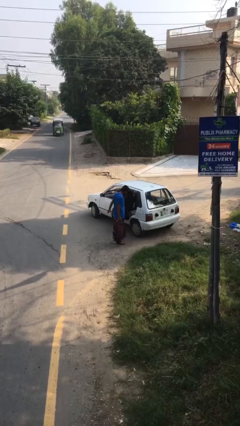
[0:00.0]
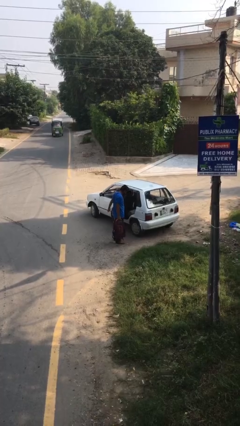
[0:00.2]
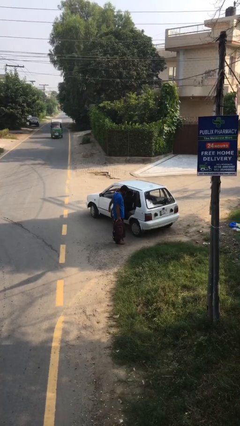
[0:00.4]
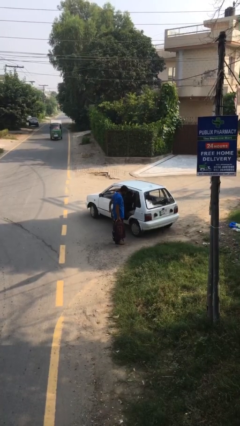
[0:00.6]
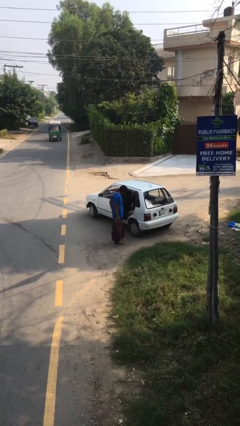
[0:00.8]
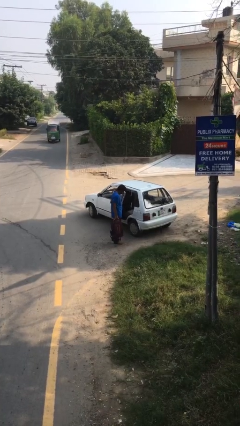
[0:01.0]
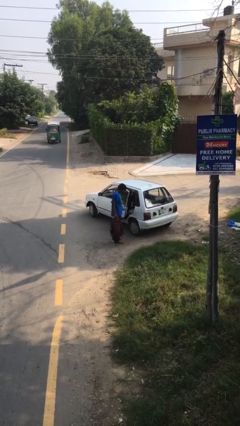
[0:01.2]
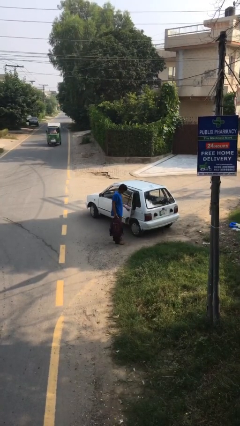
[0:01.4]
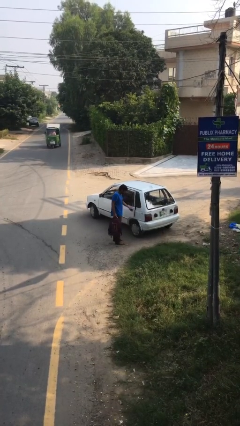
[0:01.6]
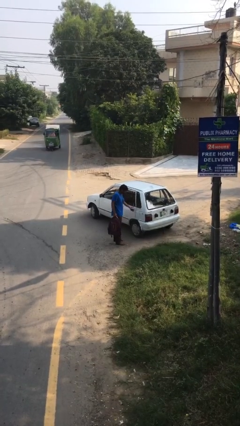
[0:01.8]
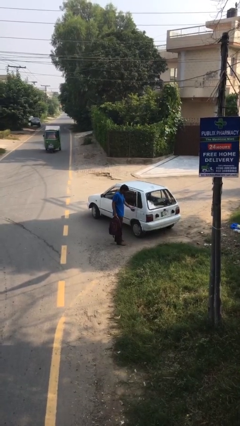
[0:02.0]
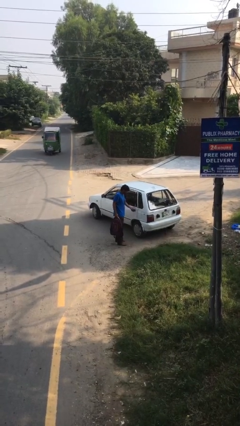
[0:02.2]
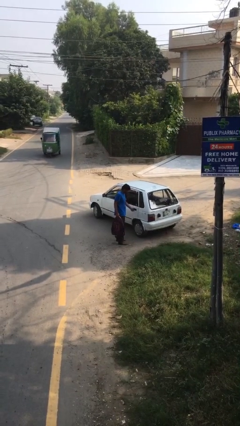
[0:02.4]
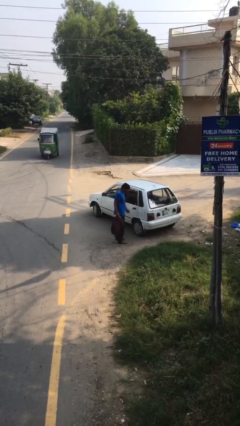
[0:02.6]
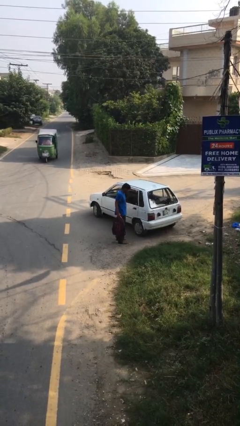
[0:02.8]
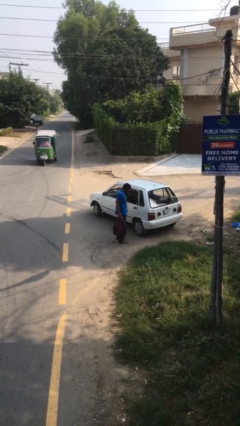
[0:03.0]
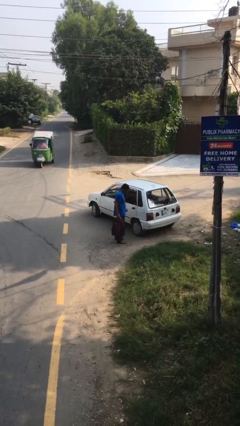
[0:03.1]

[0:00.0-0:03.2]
person closes car door

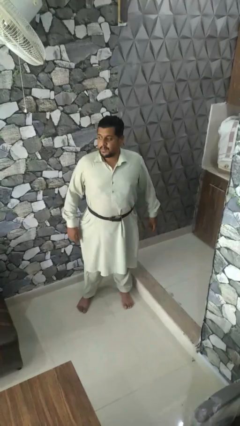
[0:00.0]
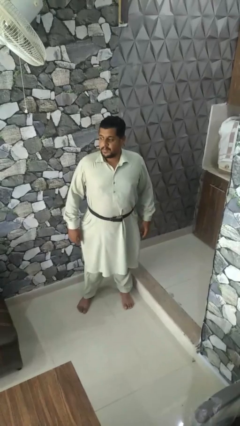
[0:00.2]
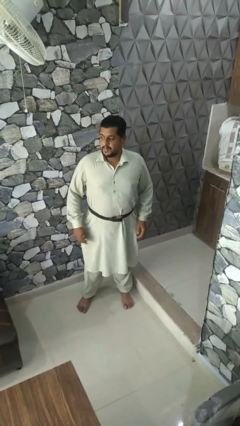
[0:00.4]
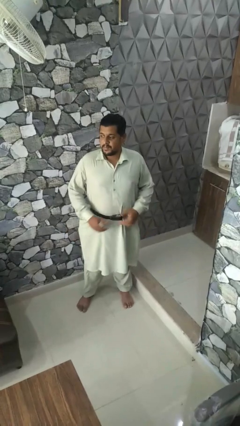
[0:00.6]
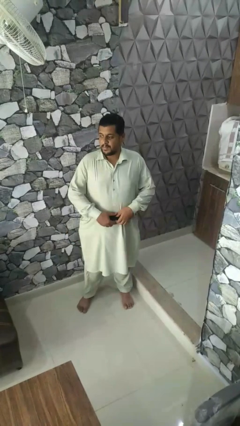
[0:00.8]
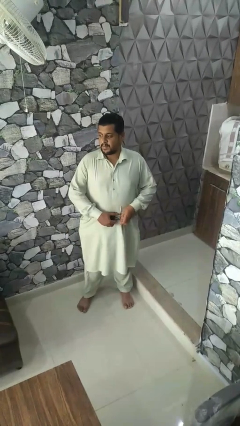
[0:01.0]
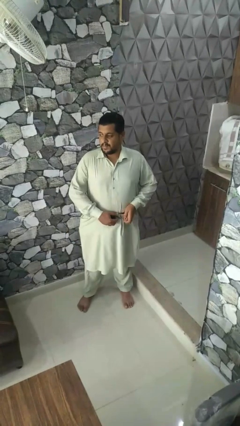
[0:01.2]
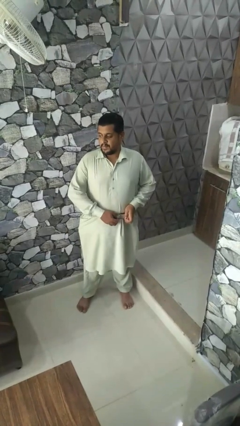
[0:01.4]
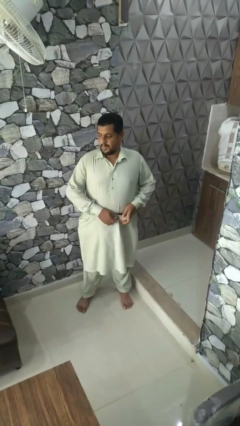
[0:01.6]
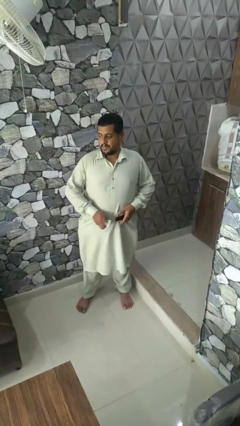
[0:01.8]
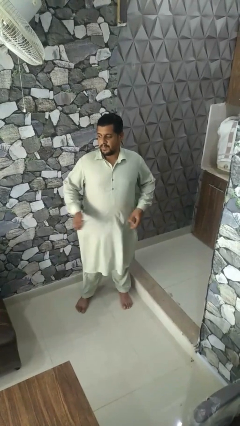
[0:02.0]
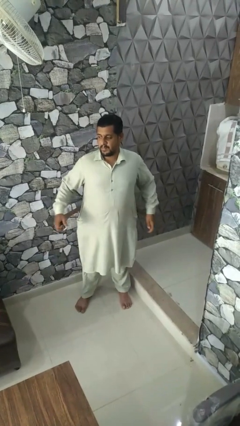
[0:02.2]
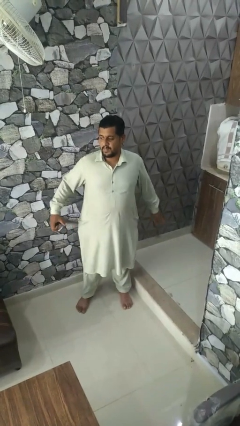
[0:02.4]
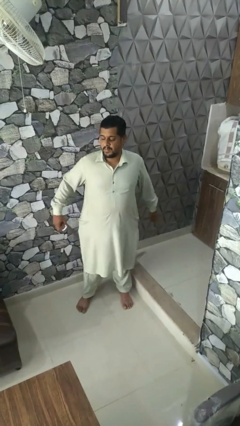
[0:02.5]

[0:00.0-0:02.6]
person takes off belt

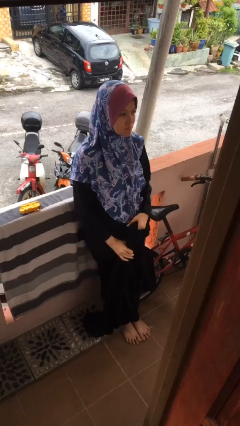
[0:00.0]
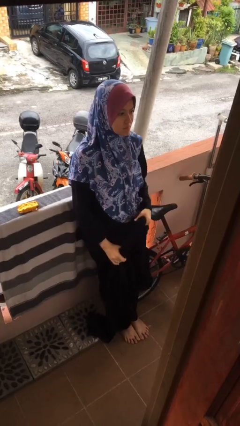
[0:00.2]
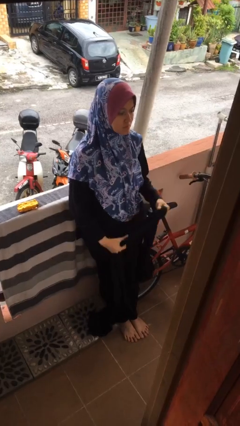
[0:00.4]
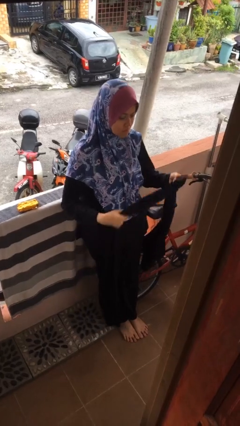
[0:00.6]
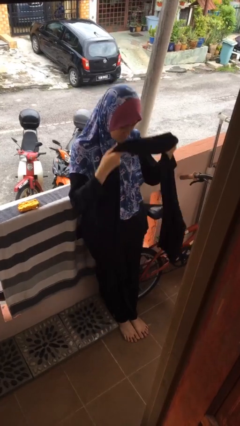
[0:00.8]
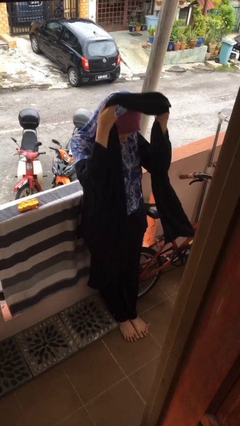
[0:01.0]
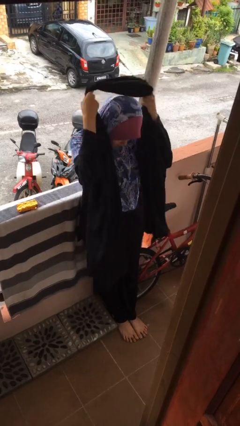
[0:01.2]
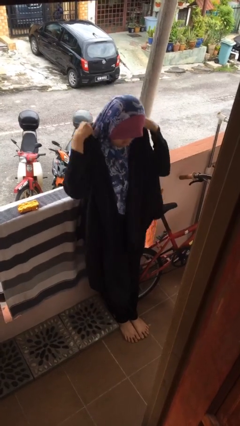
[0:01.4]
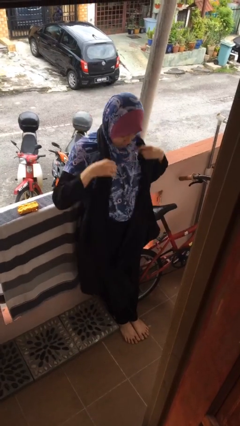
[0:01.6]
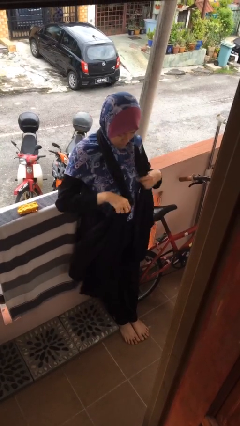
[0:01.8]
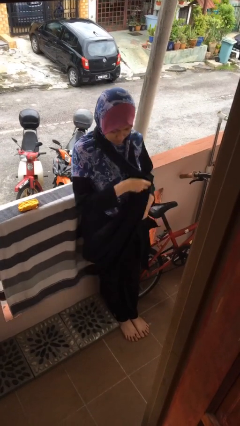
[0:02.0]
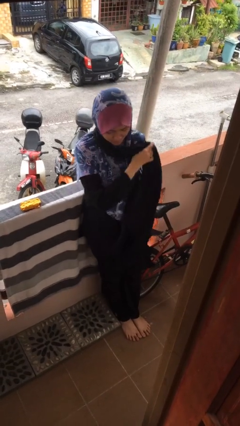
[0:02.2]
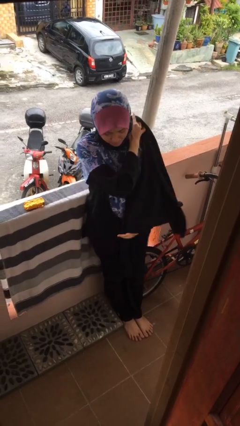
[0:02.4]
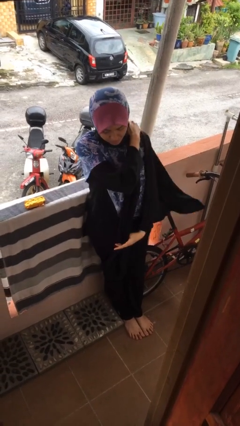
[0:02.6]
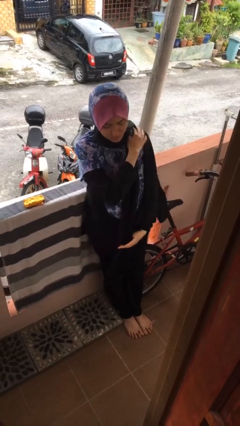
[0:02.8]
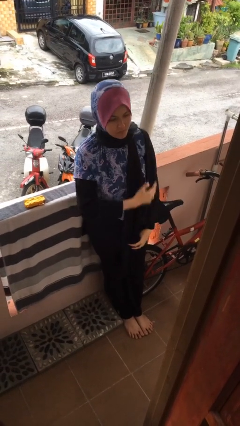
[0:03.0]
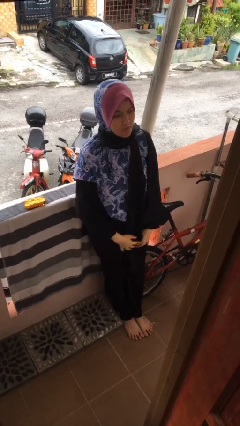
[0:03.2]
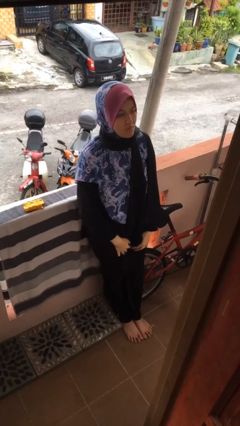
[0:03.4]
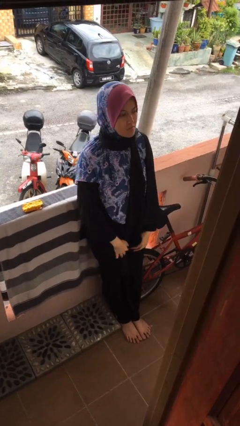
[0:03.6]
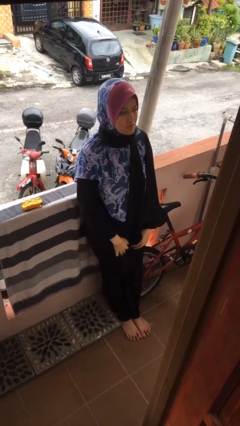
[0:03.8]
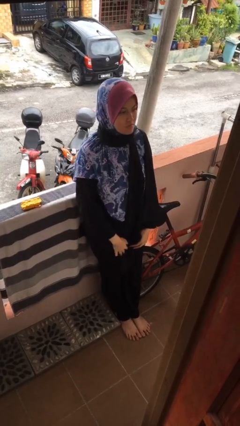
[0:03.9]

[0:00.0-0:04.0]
person puts on scarf

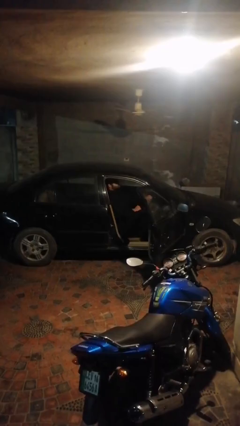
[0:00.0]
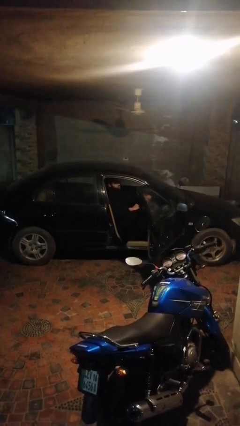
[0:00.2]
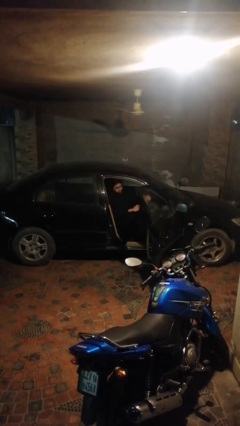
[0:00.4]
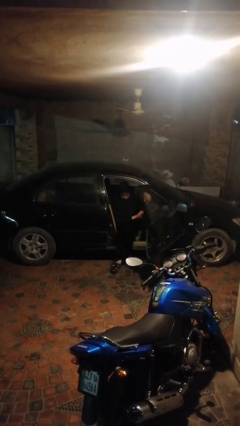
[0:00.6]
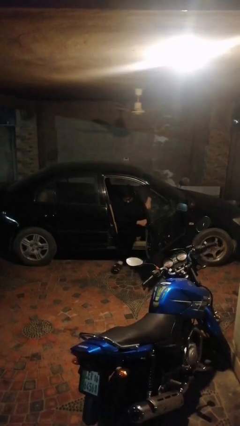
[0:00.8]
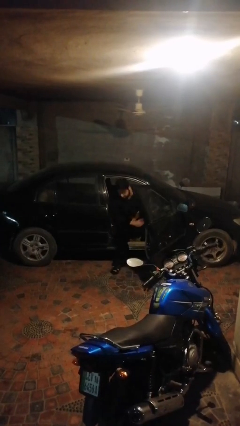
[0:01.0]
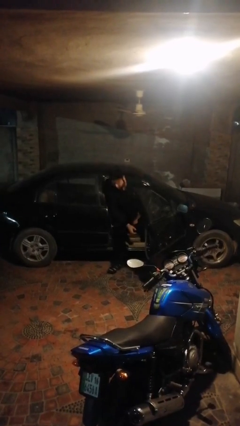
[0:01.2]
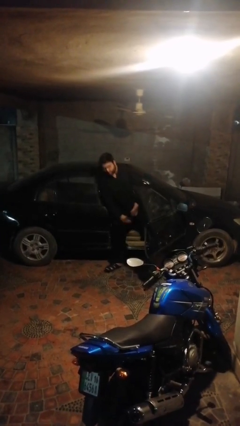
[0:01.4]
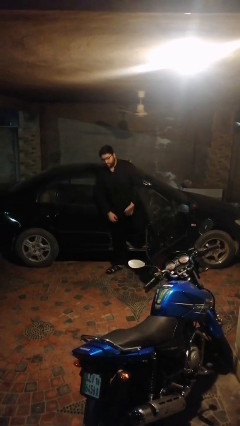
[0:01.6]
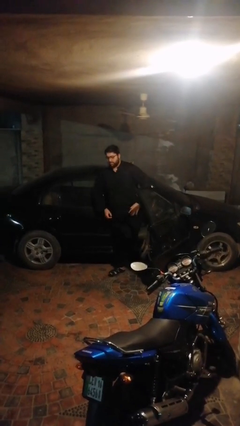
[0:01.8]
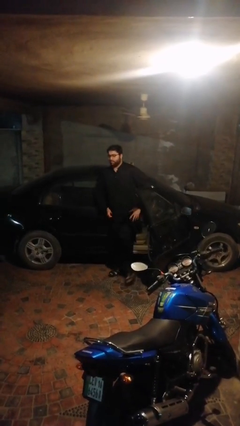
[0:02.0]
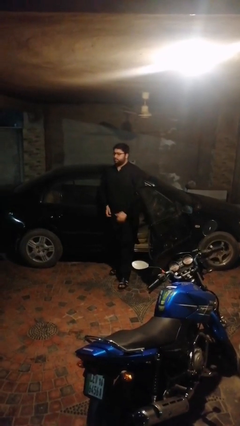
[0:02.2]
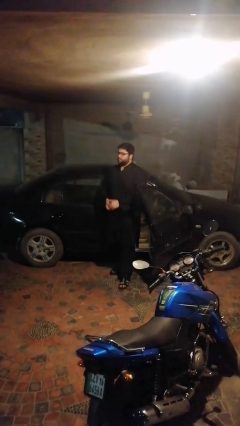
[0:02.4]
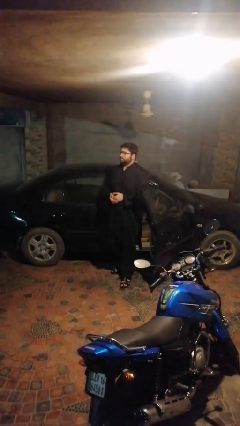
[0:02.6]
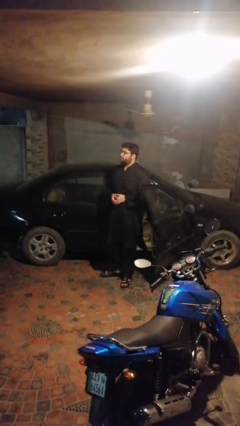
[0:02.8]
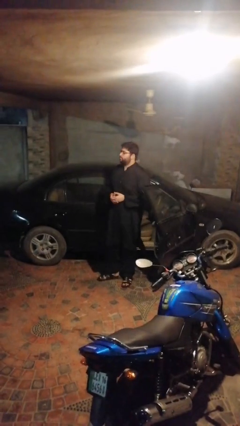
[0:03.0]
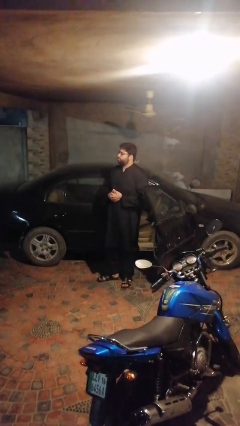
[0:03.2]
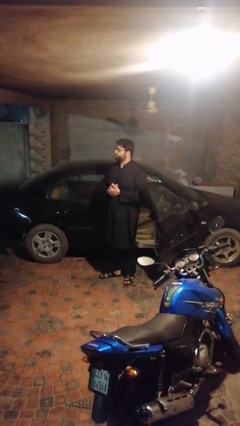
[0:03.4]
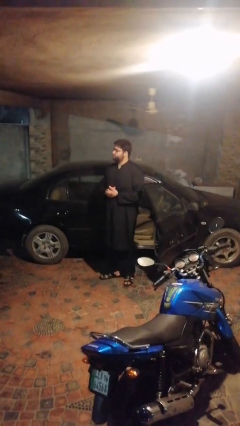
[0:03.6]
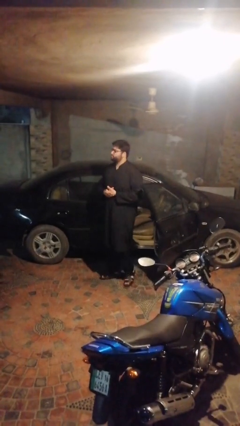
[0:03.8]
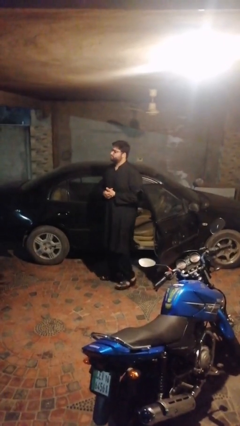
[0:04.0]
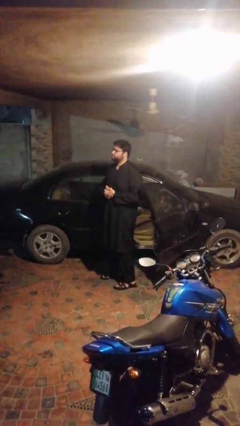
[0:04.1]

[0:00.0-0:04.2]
person exits car

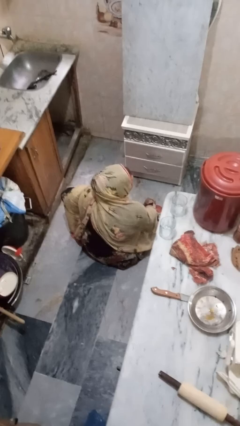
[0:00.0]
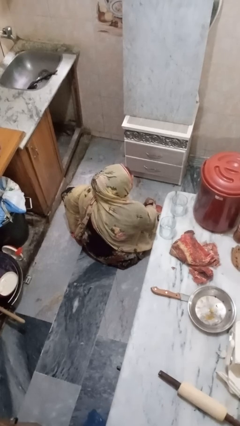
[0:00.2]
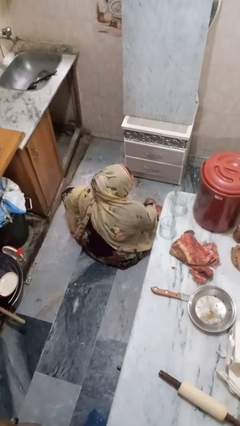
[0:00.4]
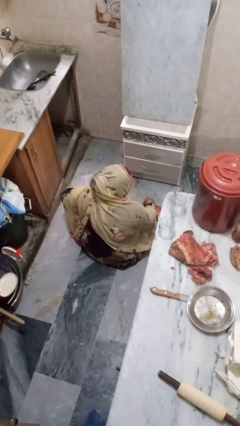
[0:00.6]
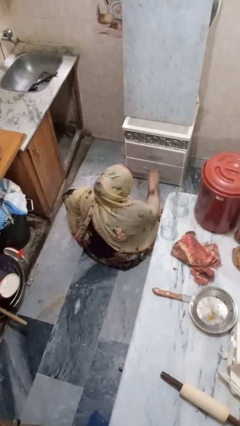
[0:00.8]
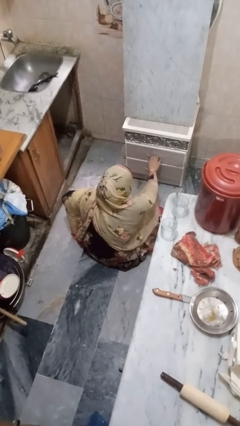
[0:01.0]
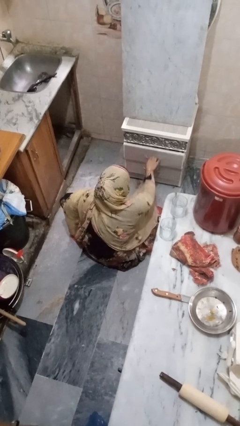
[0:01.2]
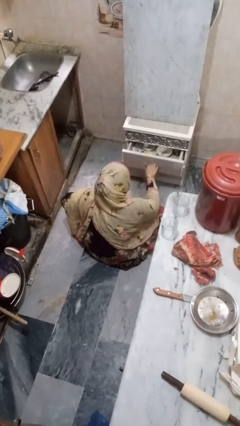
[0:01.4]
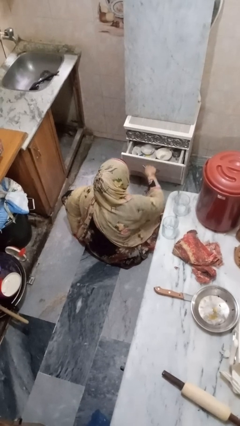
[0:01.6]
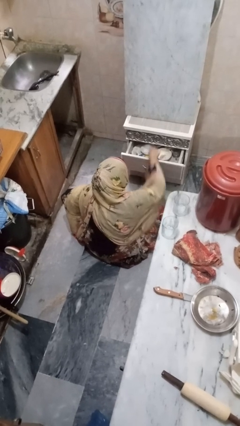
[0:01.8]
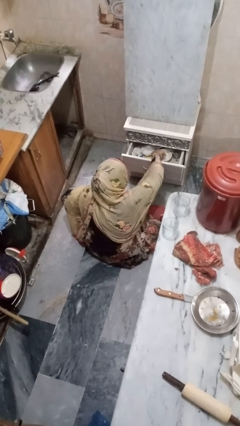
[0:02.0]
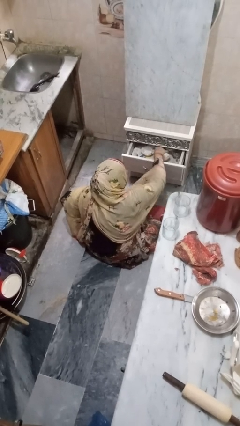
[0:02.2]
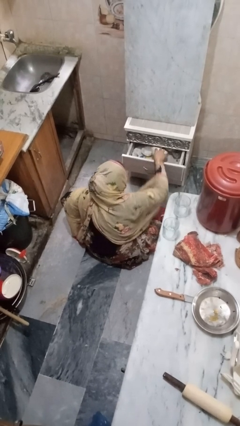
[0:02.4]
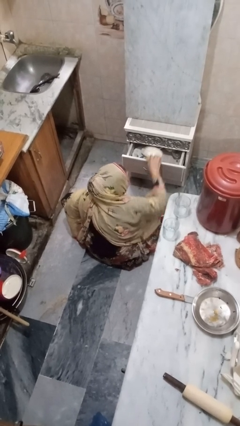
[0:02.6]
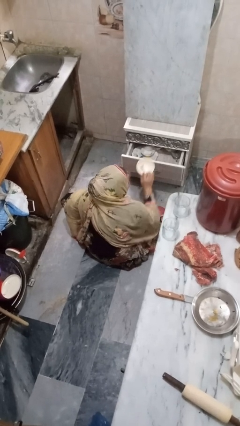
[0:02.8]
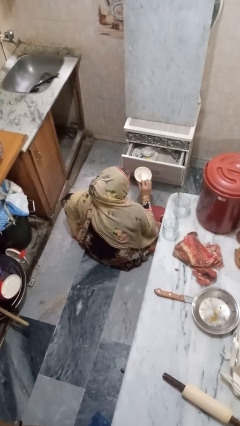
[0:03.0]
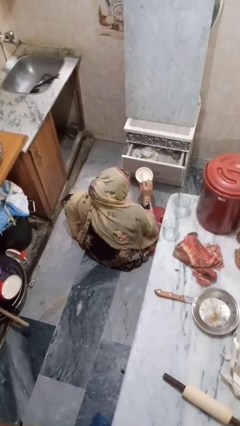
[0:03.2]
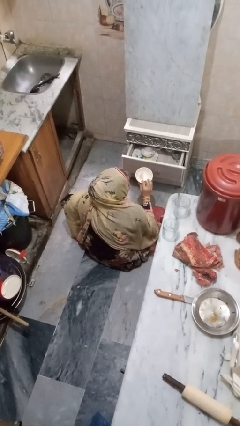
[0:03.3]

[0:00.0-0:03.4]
person takes object from kitchen drawer
